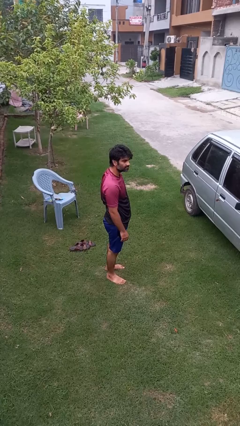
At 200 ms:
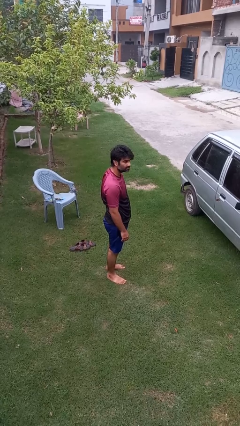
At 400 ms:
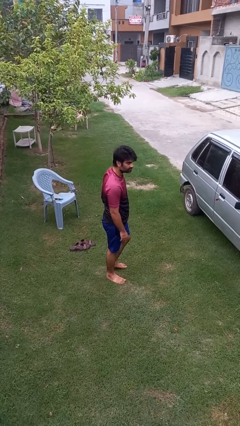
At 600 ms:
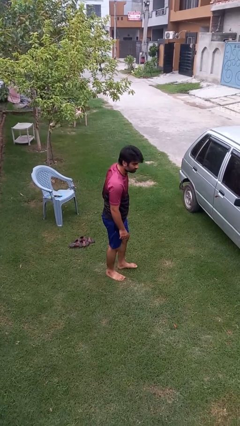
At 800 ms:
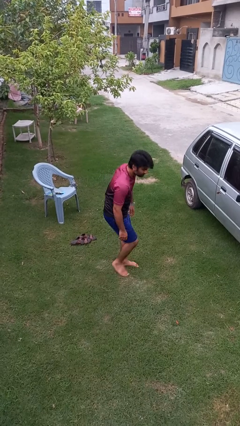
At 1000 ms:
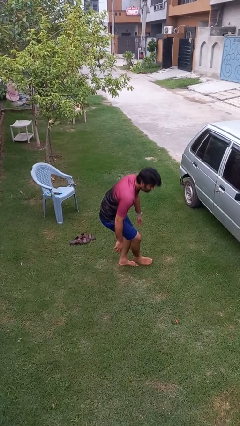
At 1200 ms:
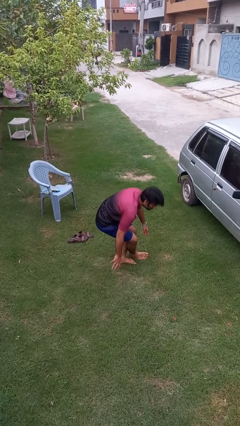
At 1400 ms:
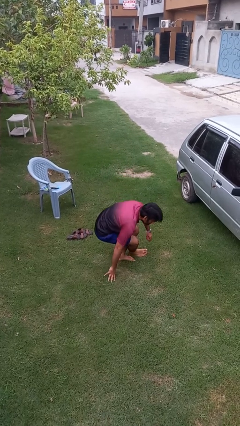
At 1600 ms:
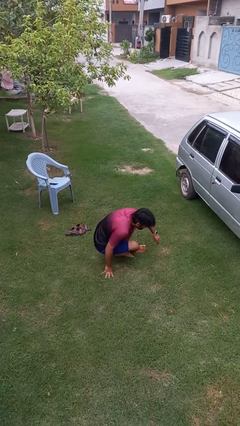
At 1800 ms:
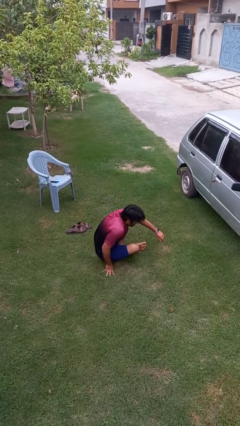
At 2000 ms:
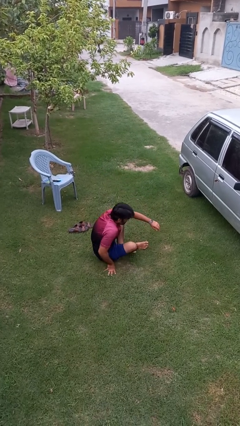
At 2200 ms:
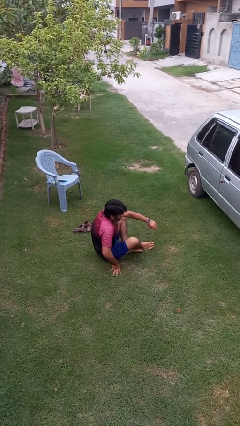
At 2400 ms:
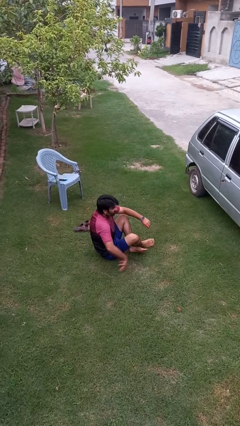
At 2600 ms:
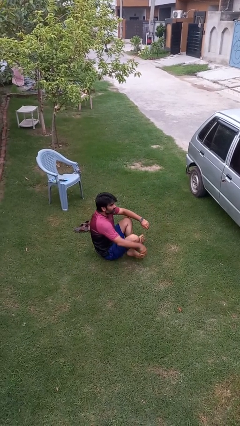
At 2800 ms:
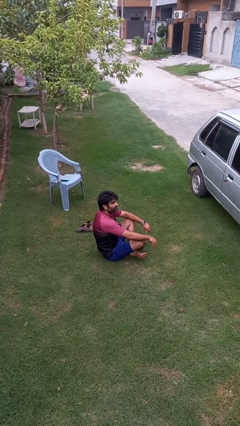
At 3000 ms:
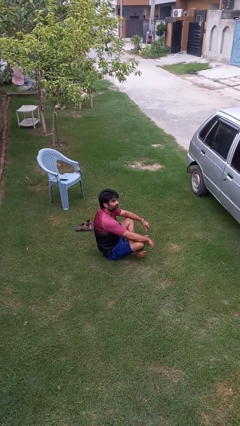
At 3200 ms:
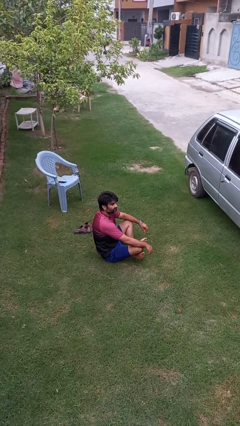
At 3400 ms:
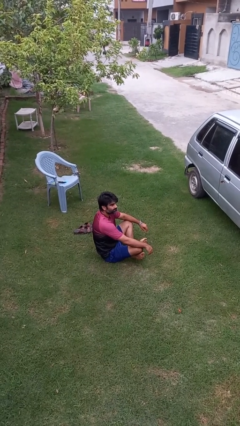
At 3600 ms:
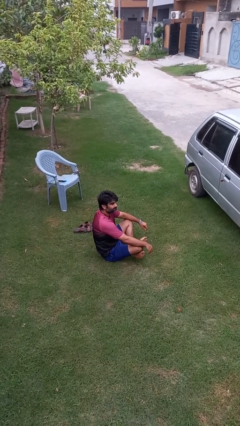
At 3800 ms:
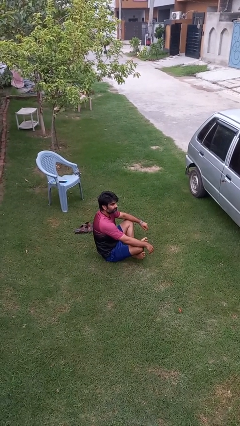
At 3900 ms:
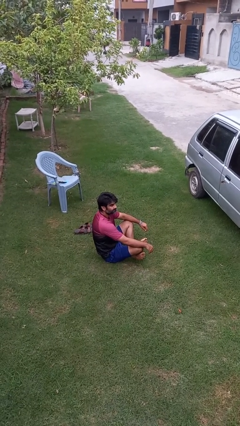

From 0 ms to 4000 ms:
person sits crisscross

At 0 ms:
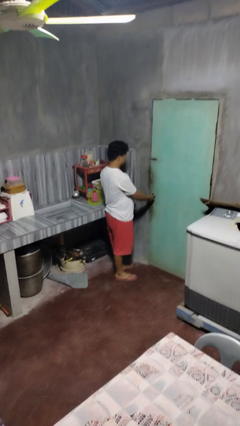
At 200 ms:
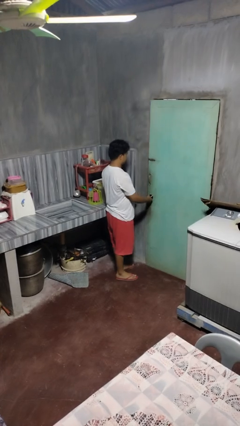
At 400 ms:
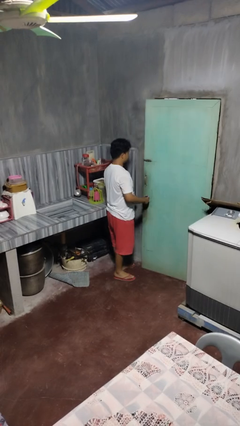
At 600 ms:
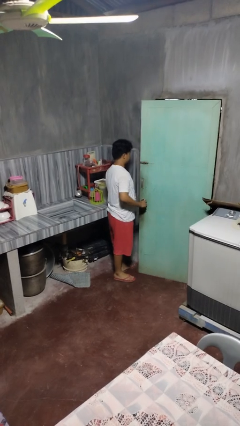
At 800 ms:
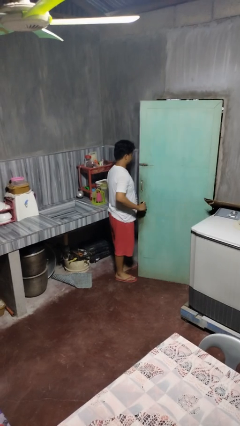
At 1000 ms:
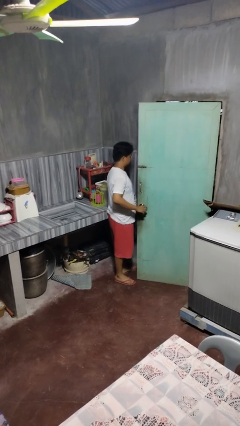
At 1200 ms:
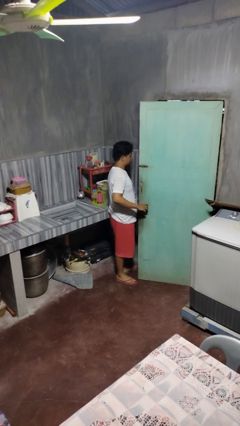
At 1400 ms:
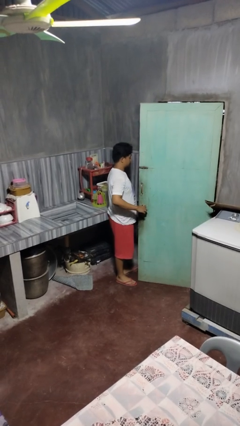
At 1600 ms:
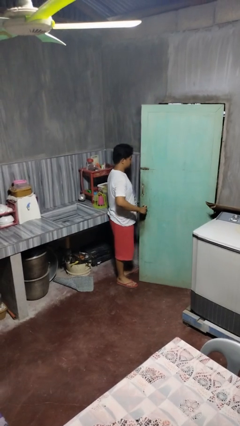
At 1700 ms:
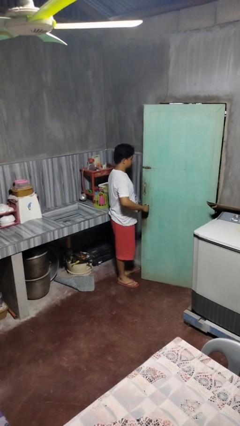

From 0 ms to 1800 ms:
person opens facility door

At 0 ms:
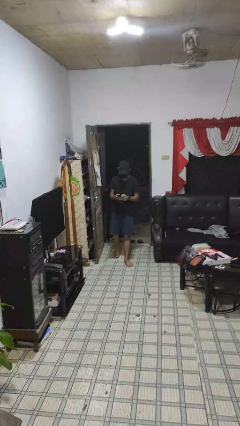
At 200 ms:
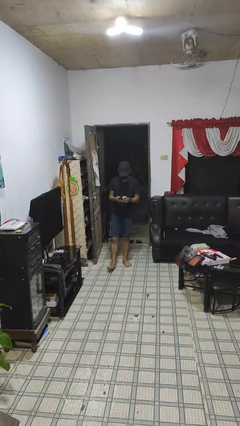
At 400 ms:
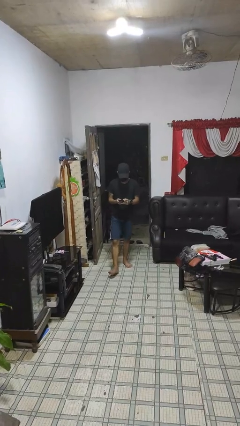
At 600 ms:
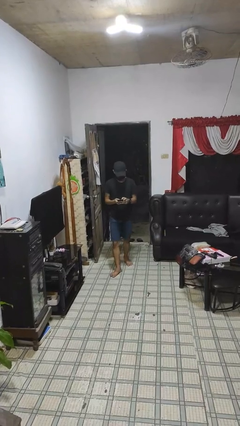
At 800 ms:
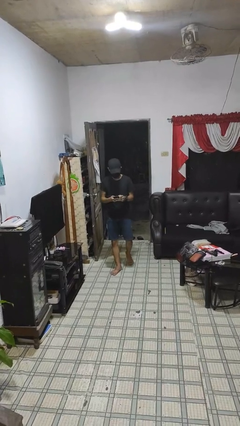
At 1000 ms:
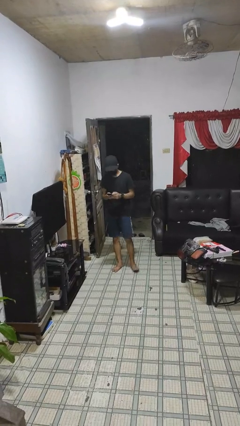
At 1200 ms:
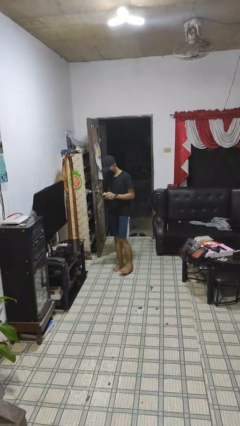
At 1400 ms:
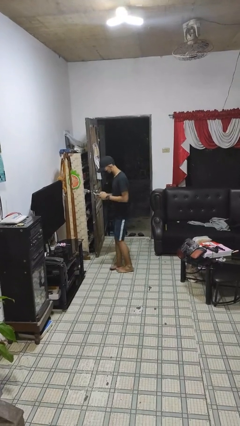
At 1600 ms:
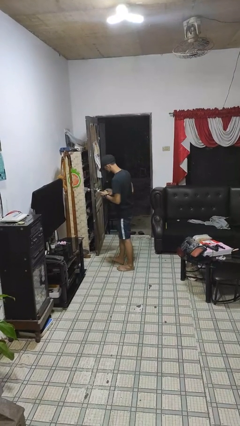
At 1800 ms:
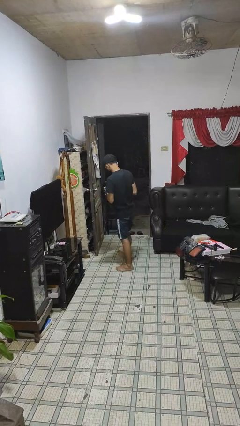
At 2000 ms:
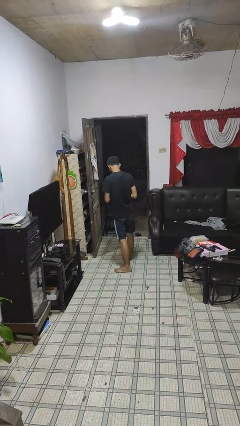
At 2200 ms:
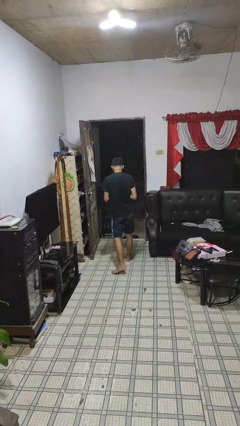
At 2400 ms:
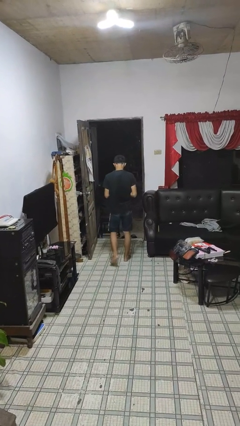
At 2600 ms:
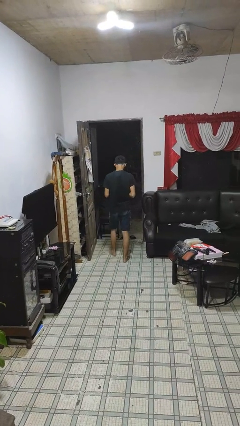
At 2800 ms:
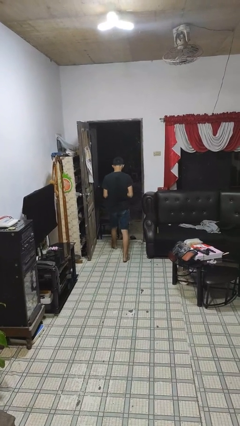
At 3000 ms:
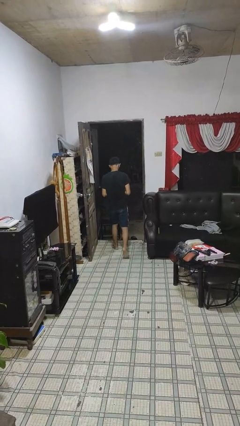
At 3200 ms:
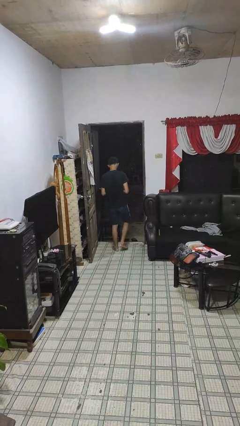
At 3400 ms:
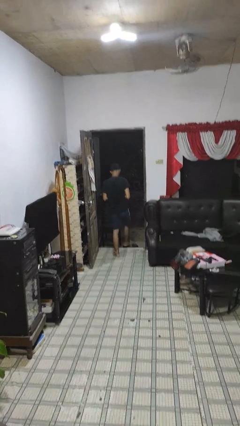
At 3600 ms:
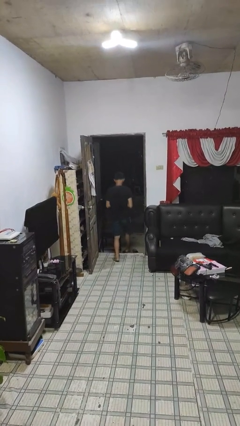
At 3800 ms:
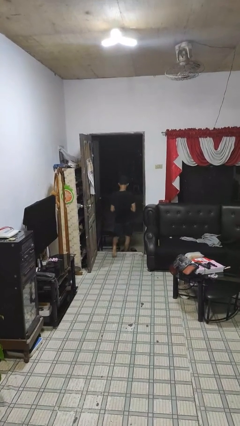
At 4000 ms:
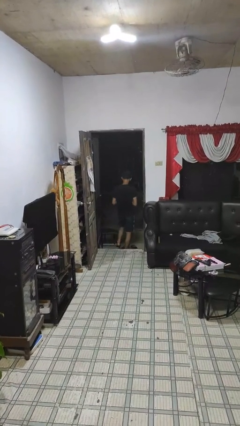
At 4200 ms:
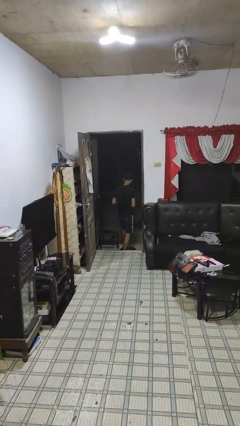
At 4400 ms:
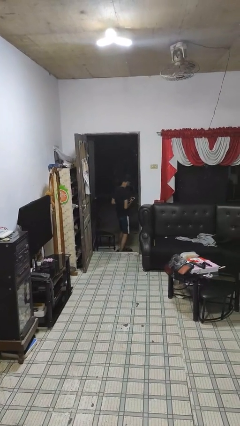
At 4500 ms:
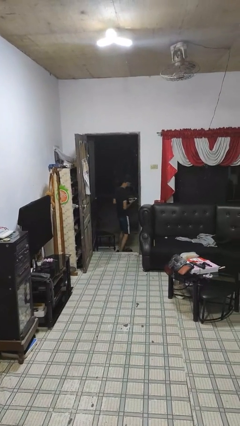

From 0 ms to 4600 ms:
person exits scene through structure

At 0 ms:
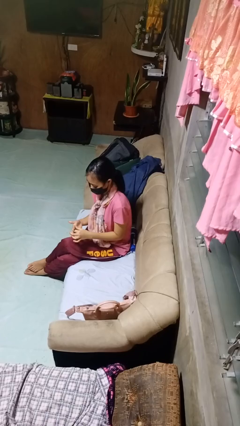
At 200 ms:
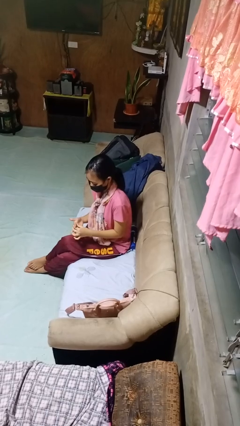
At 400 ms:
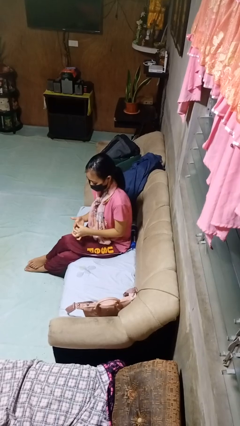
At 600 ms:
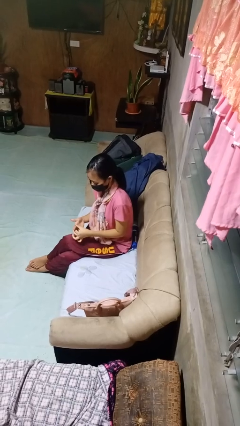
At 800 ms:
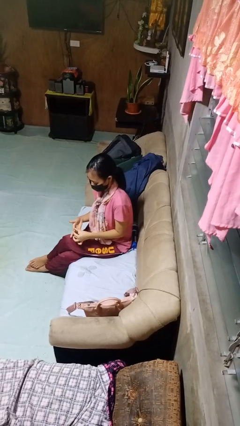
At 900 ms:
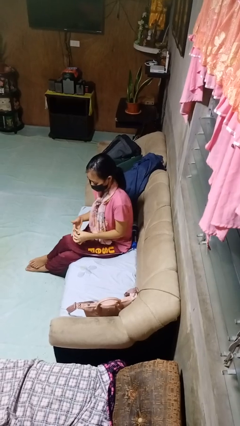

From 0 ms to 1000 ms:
person takes off ring

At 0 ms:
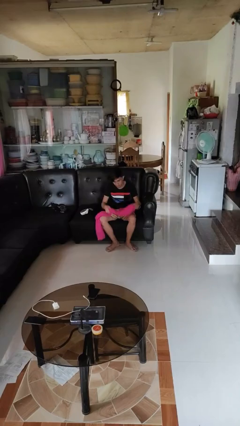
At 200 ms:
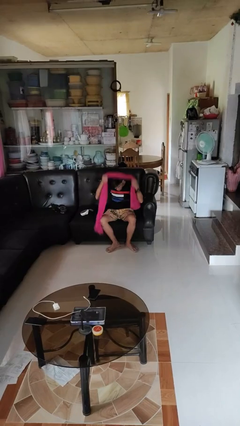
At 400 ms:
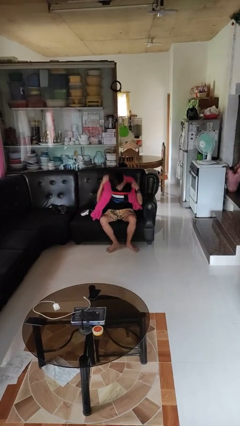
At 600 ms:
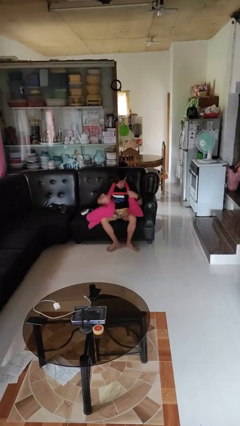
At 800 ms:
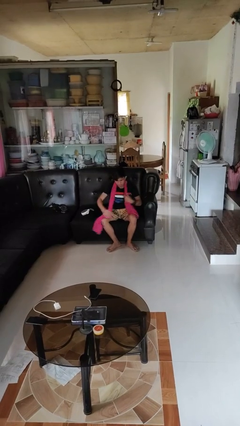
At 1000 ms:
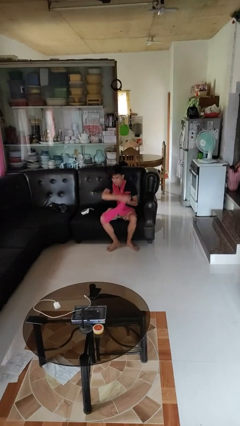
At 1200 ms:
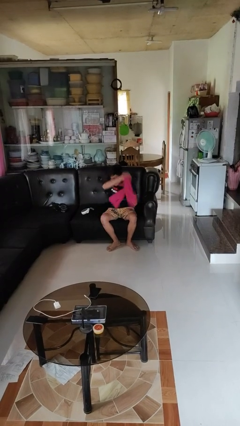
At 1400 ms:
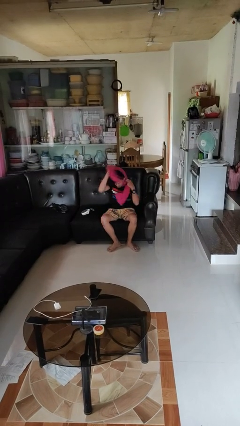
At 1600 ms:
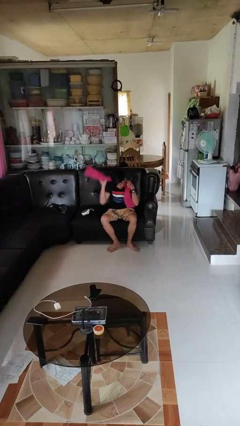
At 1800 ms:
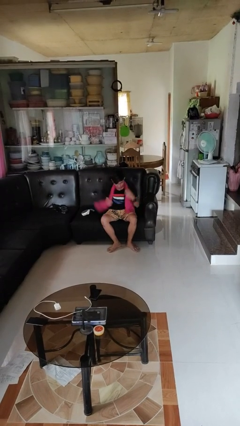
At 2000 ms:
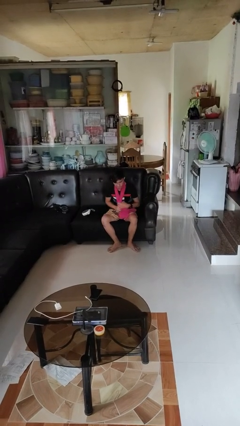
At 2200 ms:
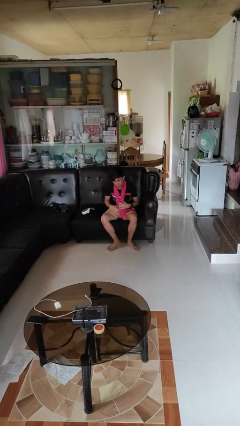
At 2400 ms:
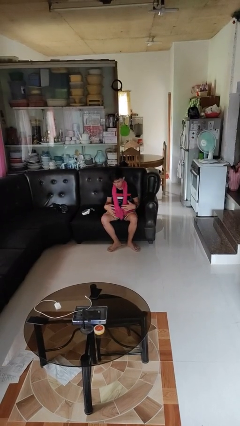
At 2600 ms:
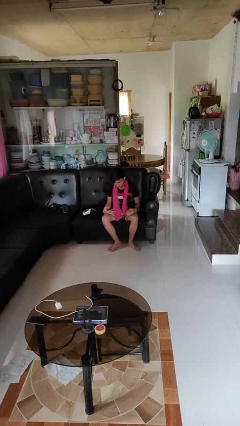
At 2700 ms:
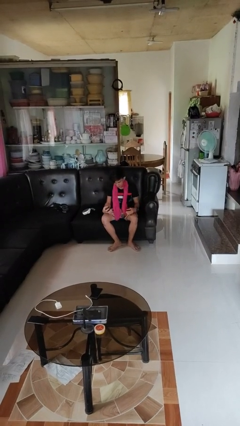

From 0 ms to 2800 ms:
person puts on scarf

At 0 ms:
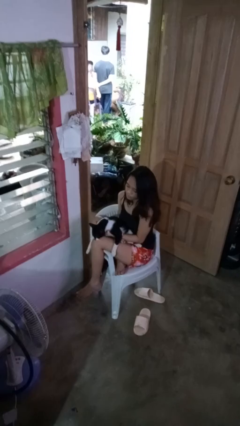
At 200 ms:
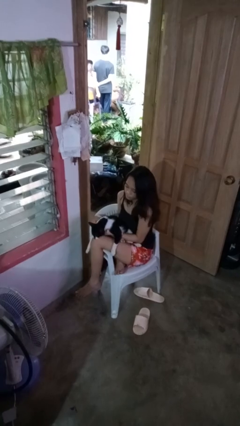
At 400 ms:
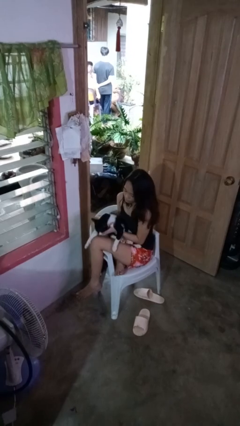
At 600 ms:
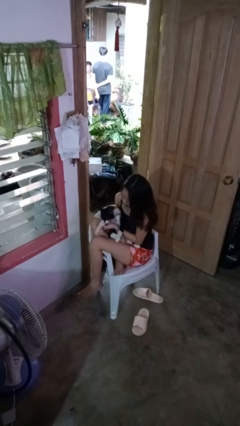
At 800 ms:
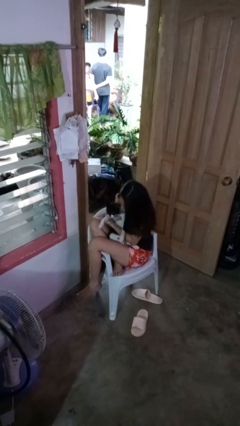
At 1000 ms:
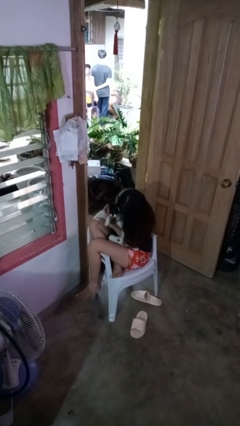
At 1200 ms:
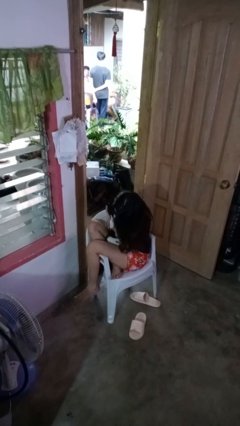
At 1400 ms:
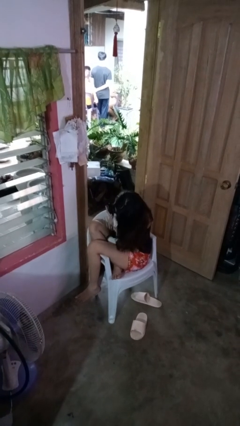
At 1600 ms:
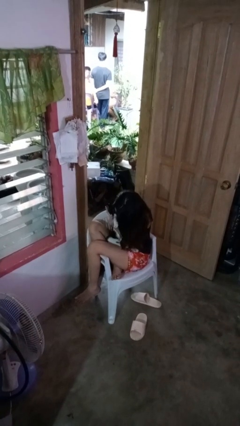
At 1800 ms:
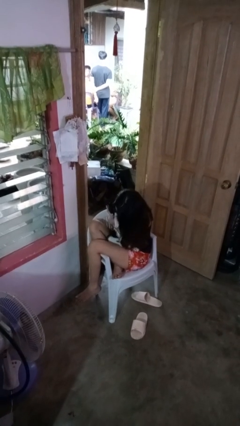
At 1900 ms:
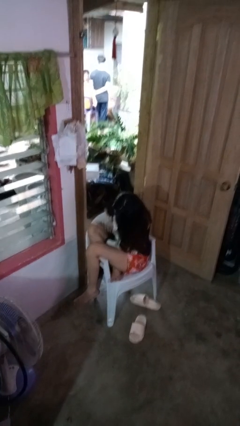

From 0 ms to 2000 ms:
person hugs cat

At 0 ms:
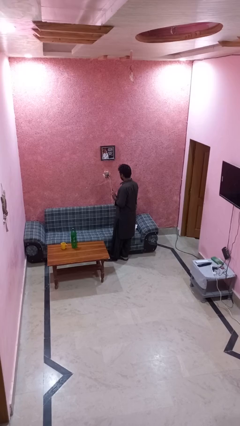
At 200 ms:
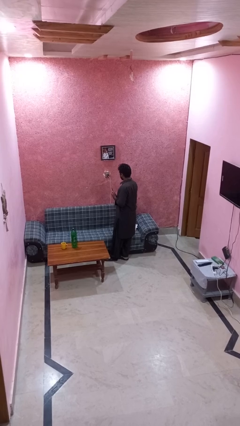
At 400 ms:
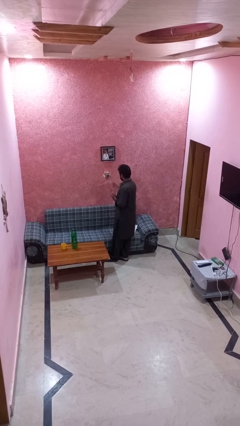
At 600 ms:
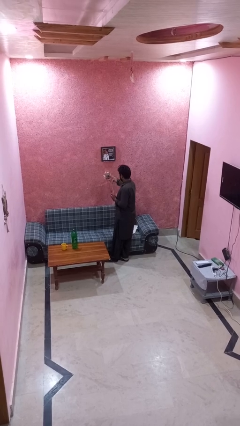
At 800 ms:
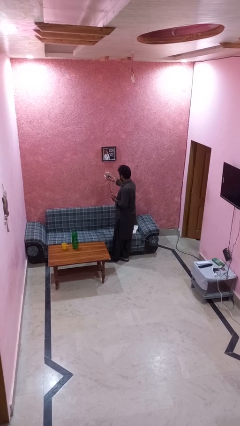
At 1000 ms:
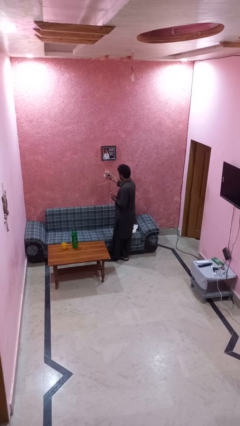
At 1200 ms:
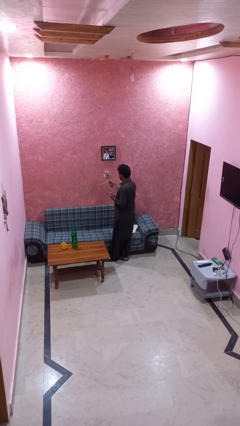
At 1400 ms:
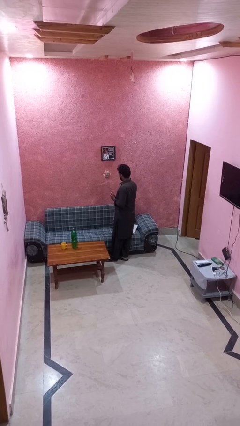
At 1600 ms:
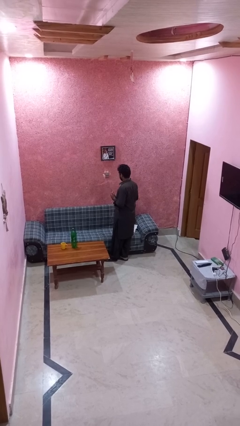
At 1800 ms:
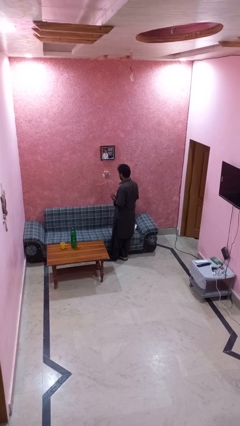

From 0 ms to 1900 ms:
person unplugs from electrical socket
